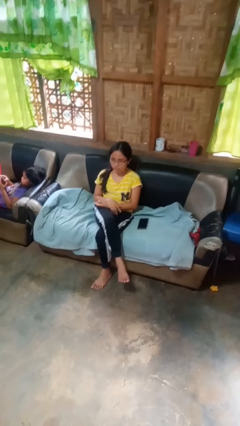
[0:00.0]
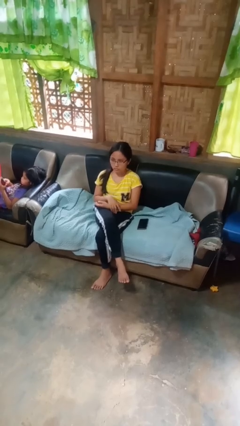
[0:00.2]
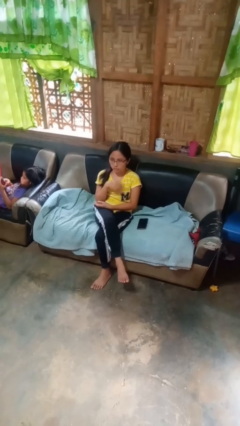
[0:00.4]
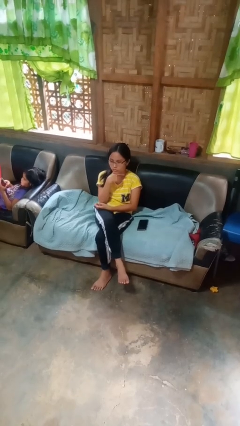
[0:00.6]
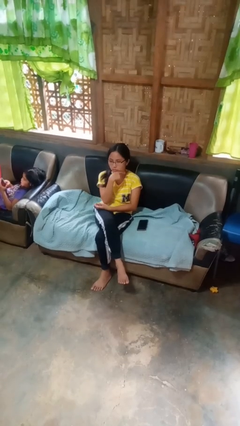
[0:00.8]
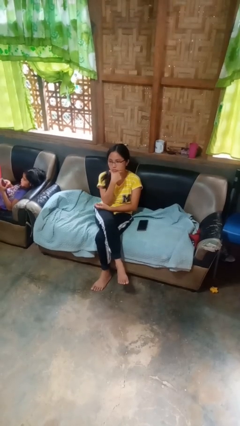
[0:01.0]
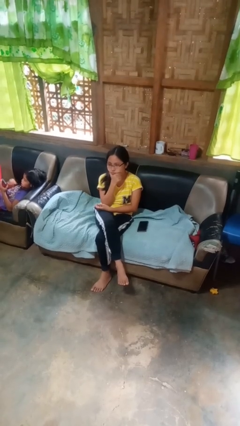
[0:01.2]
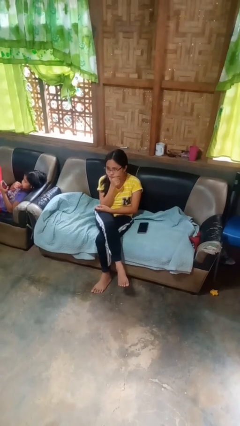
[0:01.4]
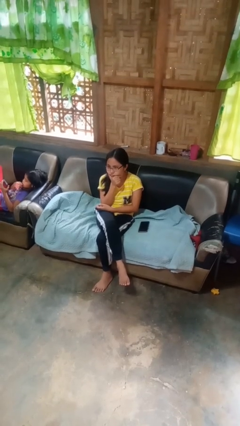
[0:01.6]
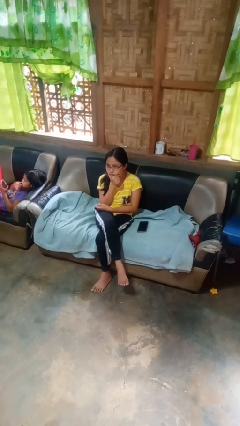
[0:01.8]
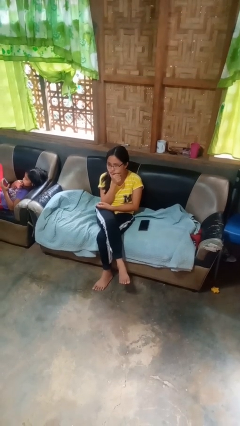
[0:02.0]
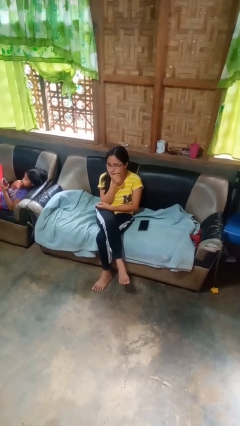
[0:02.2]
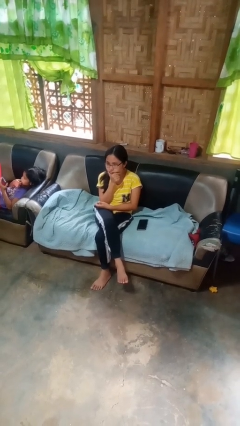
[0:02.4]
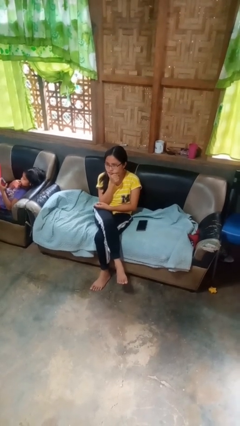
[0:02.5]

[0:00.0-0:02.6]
person strokes chin

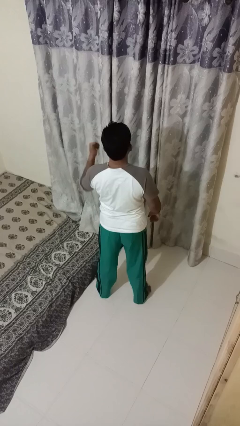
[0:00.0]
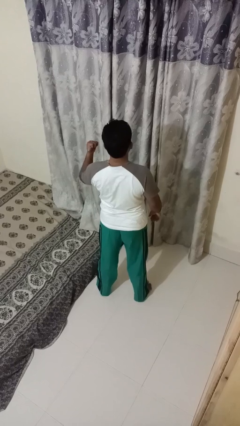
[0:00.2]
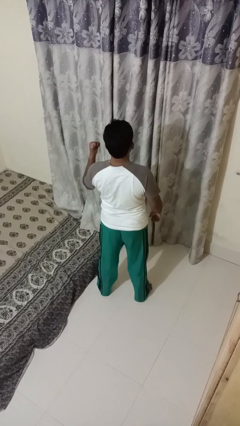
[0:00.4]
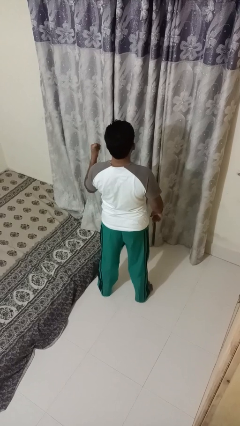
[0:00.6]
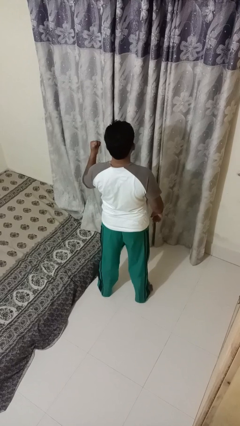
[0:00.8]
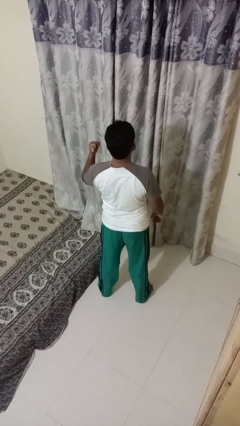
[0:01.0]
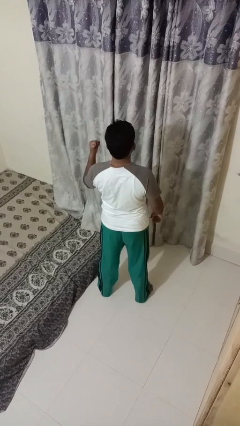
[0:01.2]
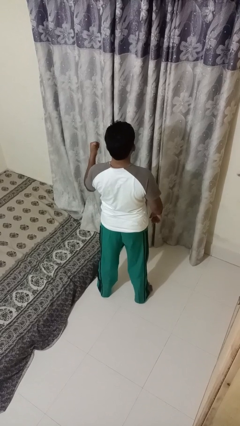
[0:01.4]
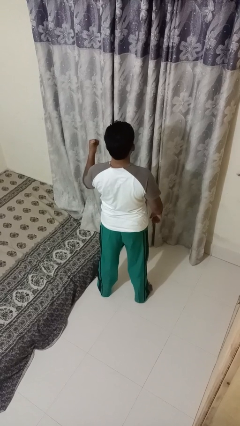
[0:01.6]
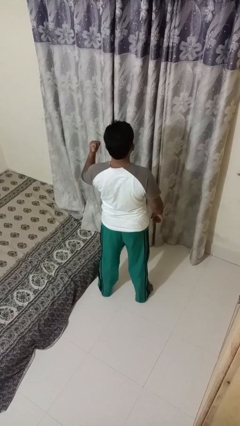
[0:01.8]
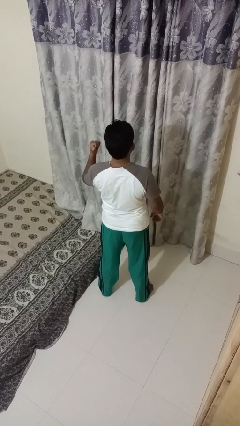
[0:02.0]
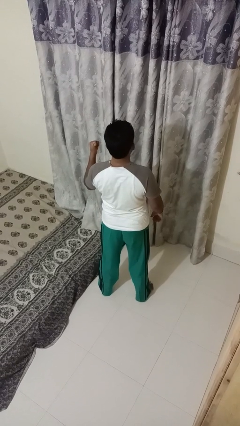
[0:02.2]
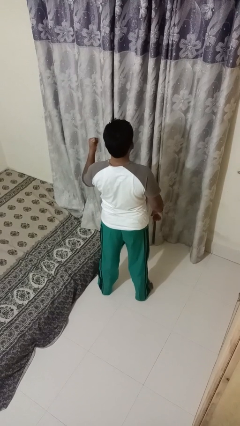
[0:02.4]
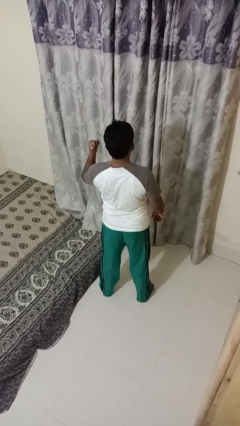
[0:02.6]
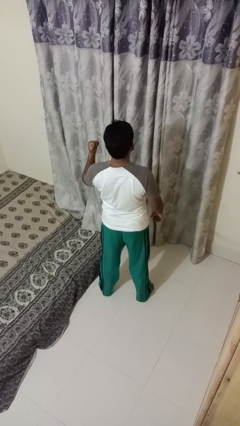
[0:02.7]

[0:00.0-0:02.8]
person gestures behind me

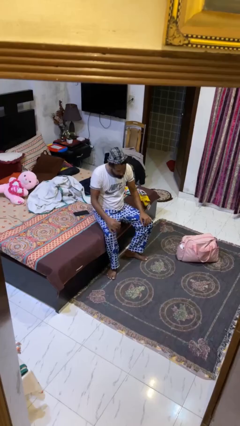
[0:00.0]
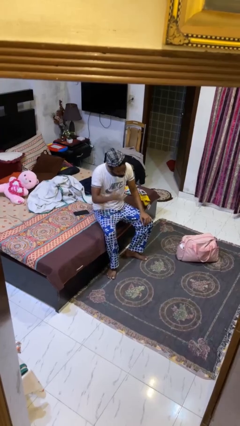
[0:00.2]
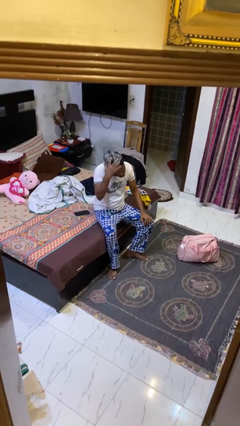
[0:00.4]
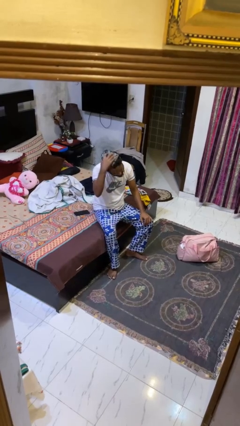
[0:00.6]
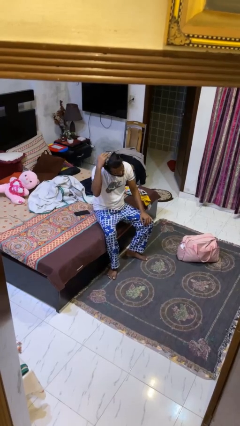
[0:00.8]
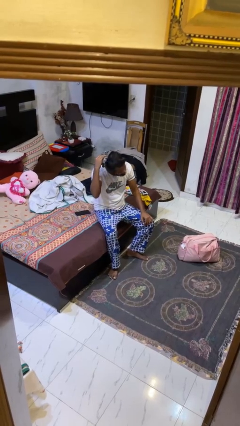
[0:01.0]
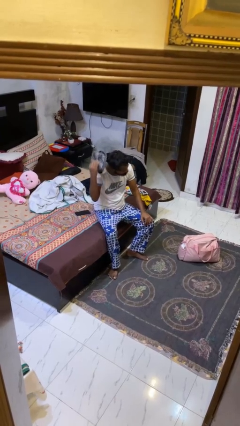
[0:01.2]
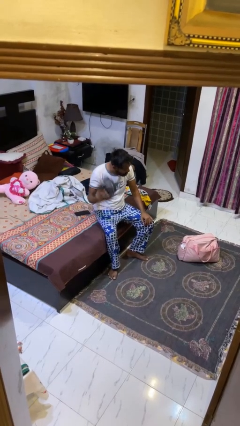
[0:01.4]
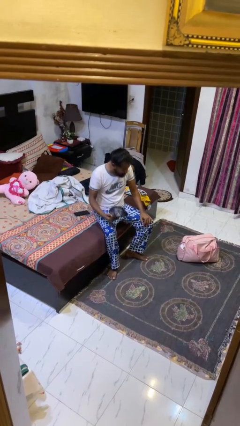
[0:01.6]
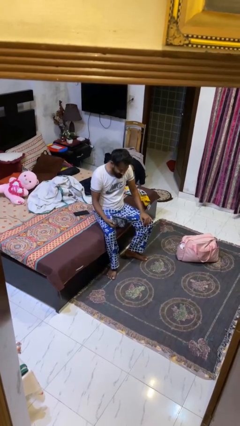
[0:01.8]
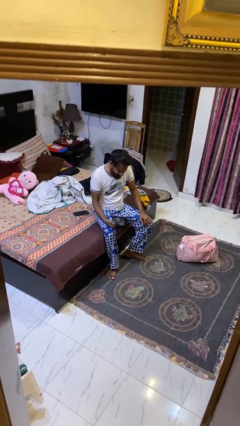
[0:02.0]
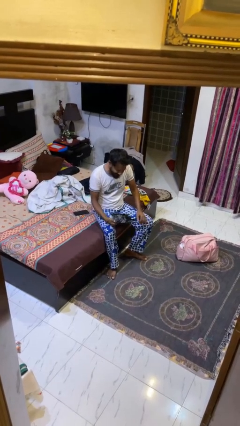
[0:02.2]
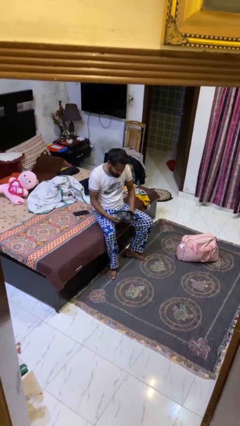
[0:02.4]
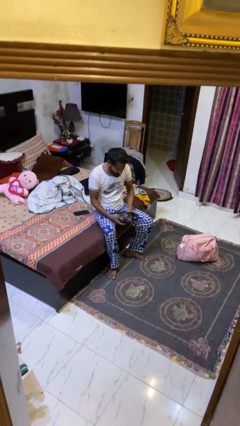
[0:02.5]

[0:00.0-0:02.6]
person takes off hat

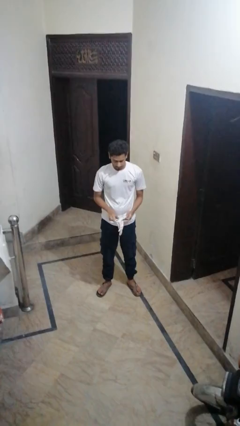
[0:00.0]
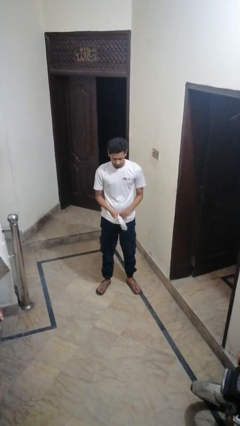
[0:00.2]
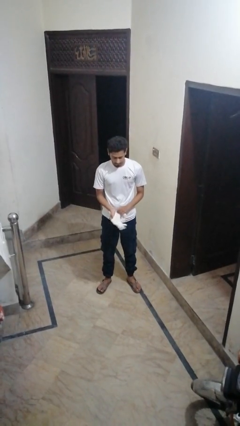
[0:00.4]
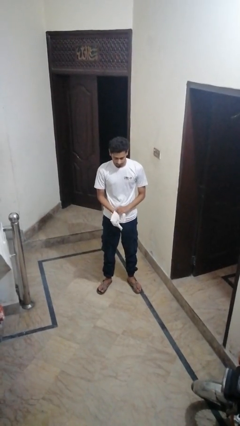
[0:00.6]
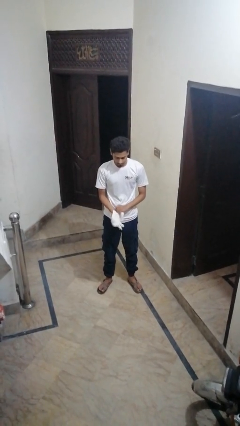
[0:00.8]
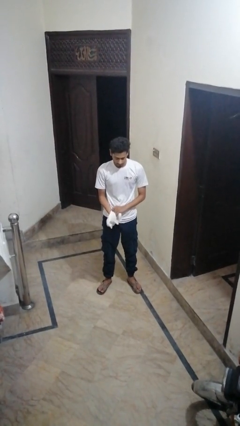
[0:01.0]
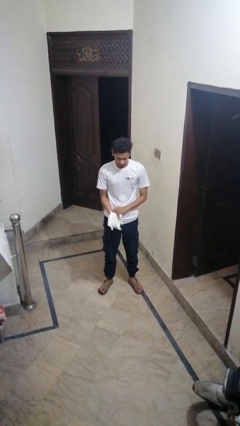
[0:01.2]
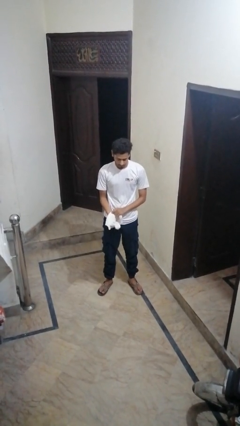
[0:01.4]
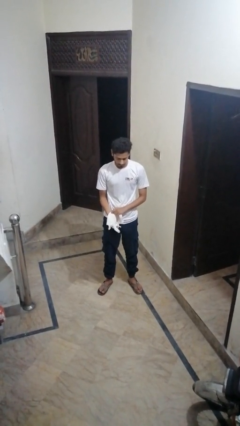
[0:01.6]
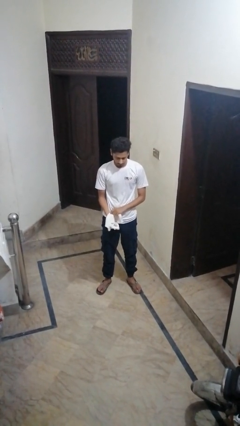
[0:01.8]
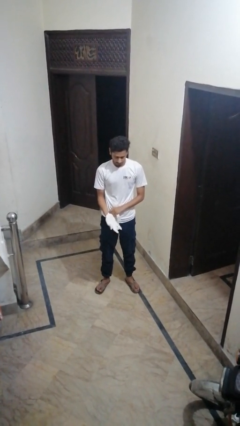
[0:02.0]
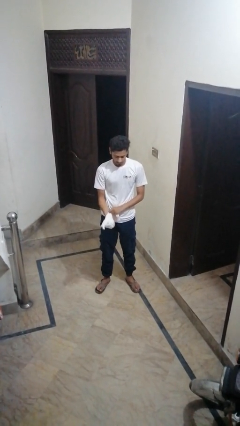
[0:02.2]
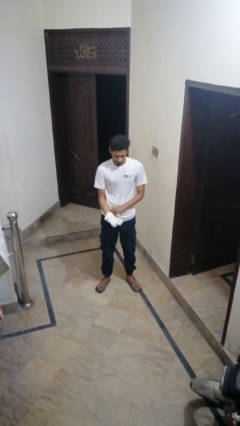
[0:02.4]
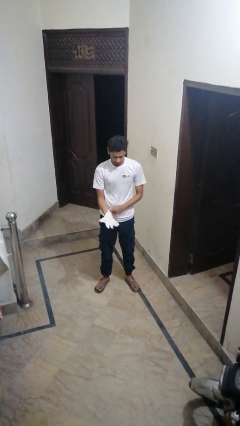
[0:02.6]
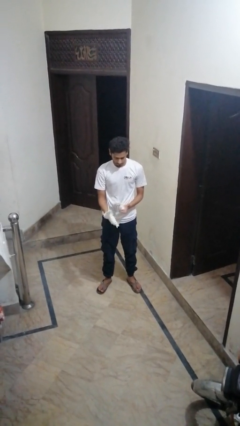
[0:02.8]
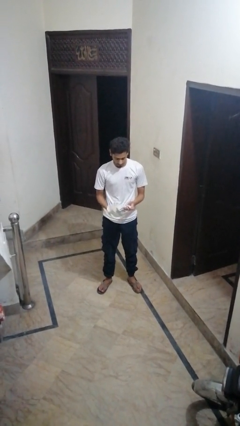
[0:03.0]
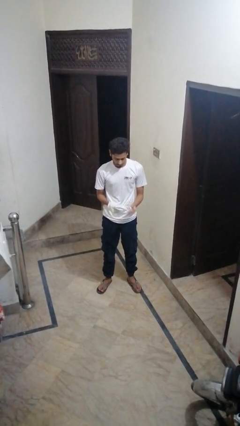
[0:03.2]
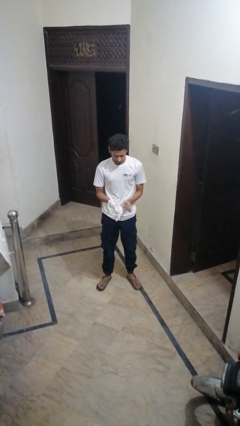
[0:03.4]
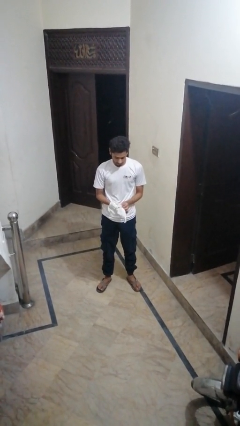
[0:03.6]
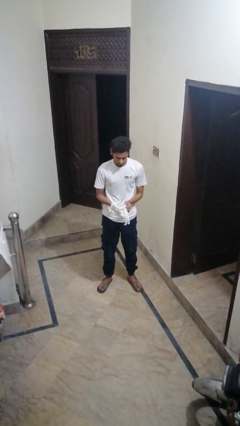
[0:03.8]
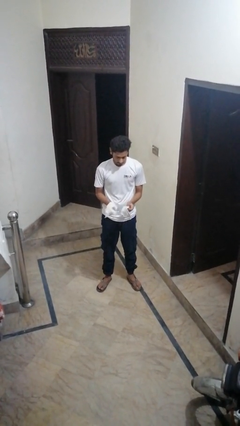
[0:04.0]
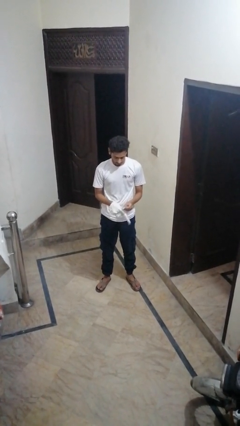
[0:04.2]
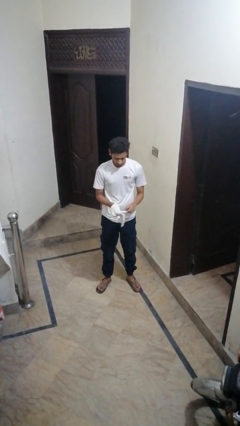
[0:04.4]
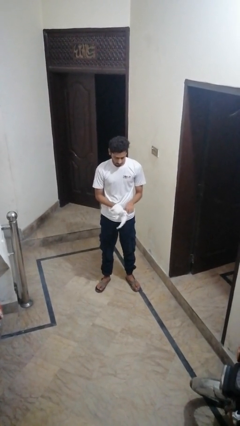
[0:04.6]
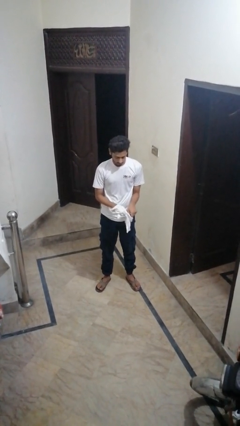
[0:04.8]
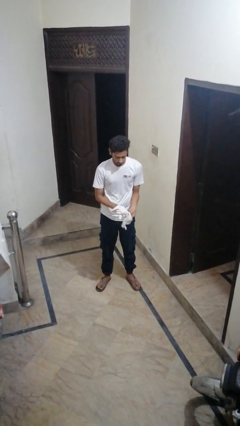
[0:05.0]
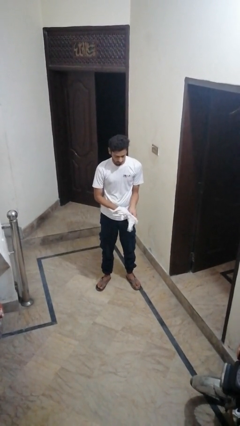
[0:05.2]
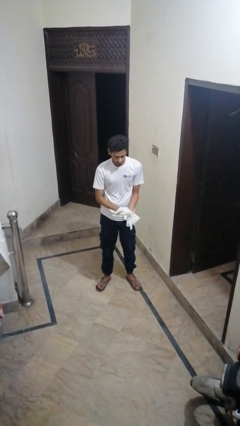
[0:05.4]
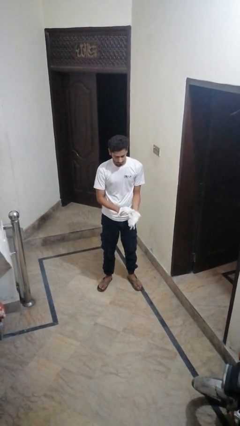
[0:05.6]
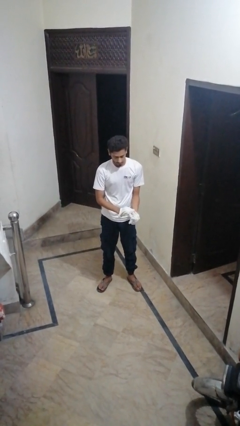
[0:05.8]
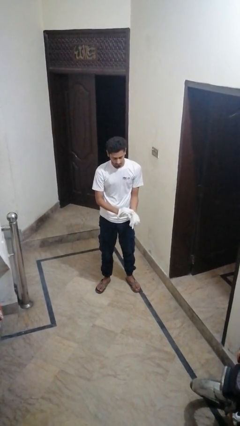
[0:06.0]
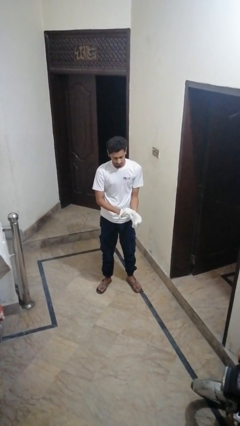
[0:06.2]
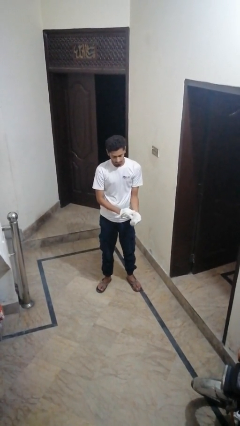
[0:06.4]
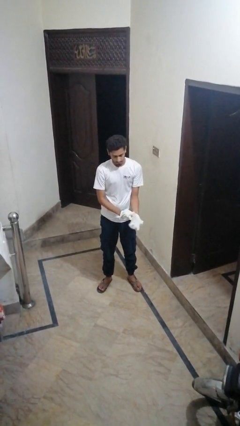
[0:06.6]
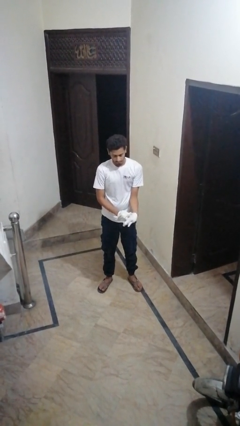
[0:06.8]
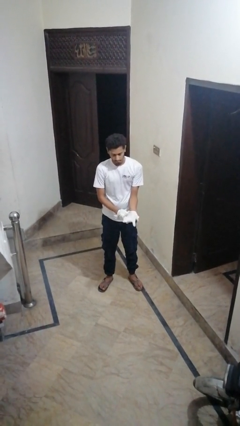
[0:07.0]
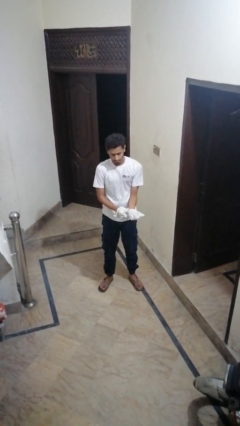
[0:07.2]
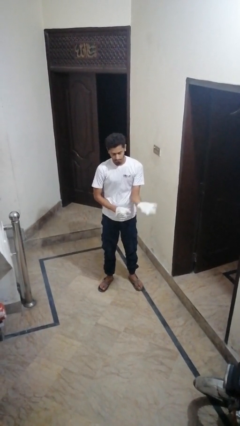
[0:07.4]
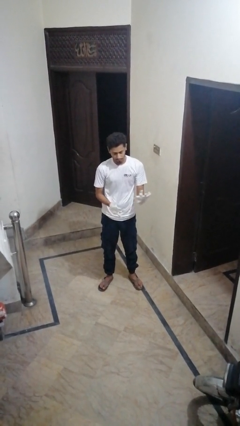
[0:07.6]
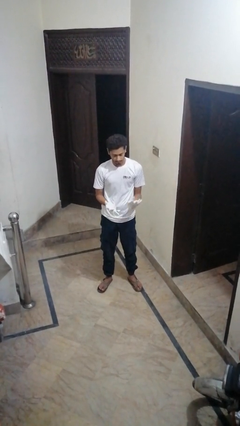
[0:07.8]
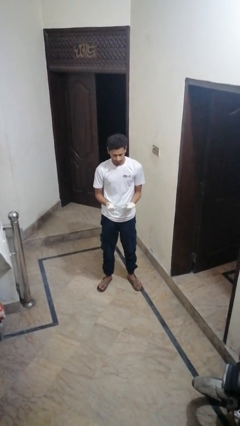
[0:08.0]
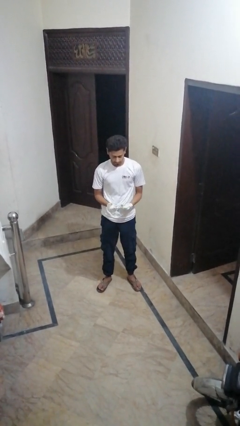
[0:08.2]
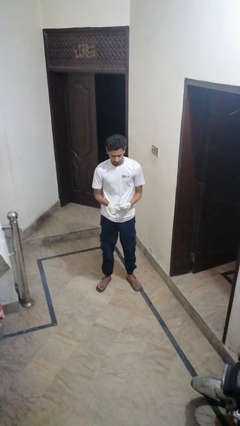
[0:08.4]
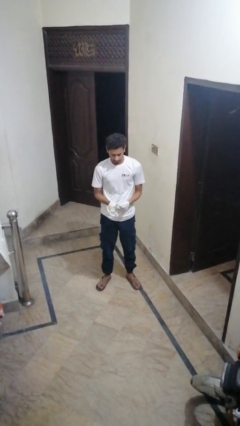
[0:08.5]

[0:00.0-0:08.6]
person puts on gloves

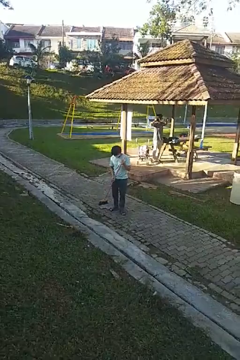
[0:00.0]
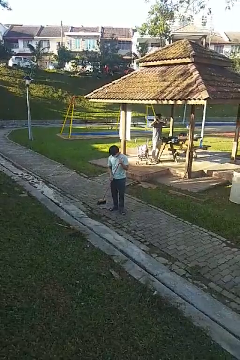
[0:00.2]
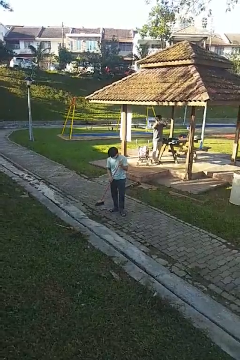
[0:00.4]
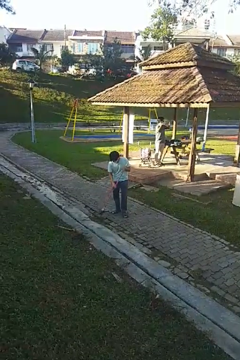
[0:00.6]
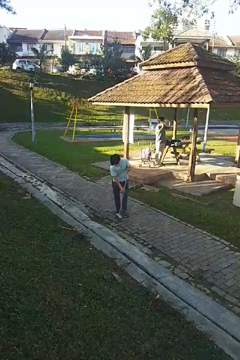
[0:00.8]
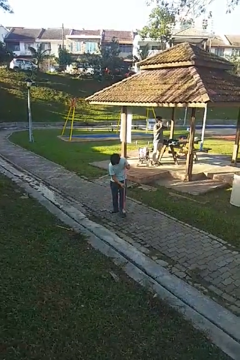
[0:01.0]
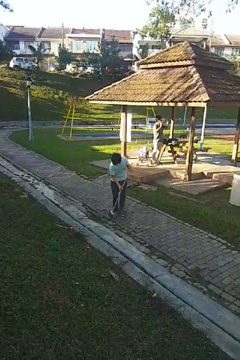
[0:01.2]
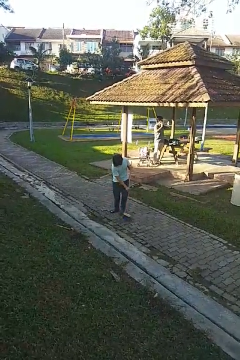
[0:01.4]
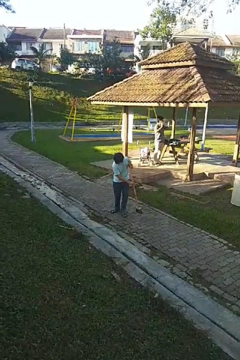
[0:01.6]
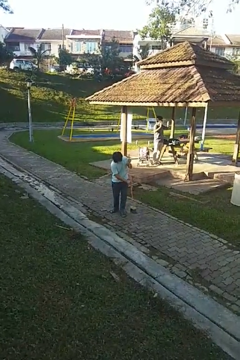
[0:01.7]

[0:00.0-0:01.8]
person sweeps floor
